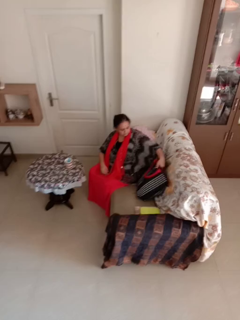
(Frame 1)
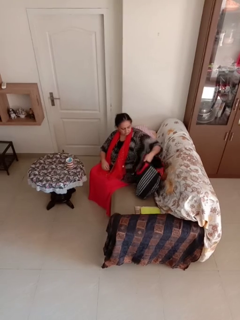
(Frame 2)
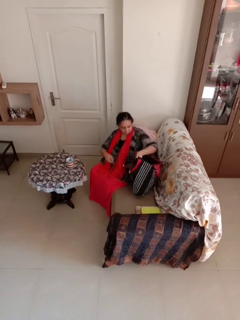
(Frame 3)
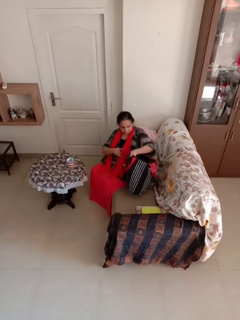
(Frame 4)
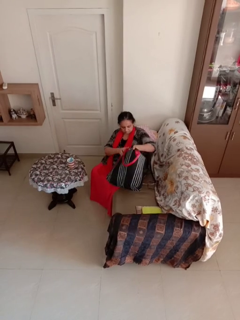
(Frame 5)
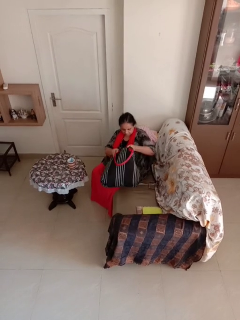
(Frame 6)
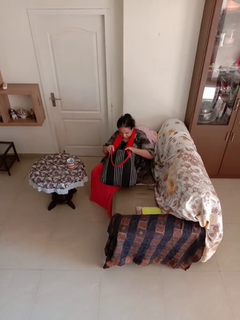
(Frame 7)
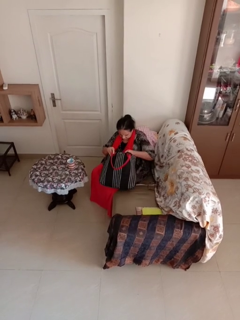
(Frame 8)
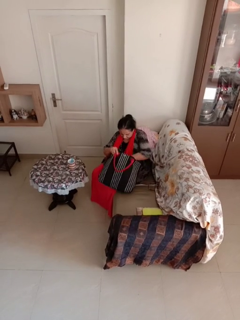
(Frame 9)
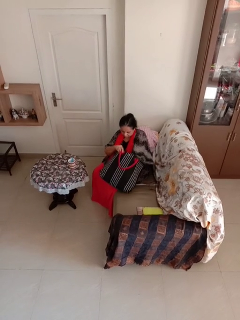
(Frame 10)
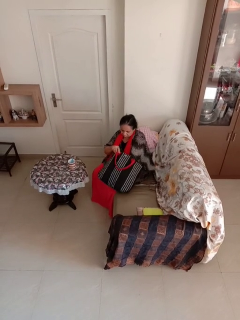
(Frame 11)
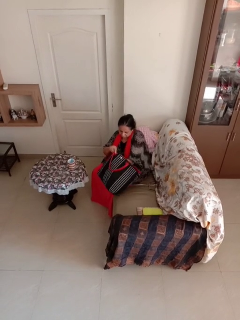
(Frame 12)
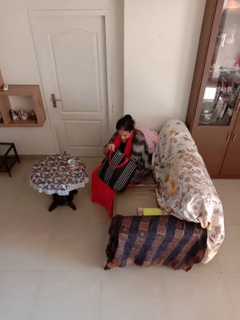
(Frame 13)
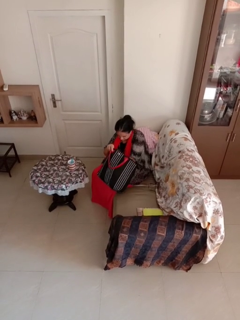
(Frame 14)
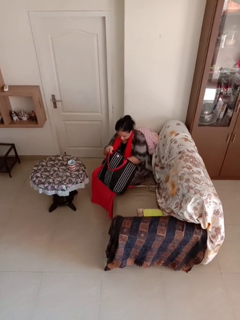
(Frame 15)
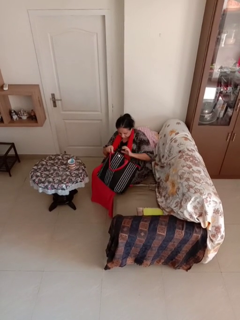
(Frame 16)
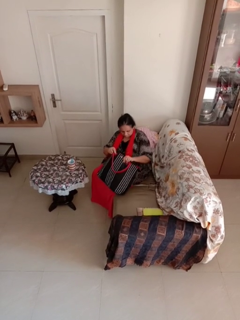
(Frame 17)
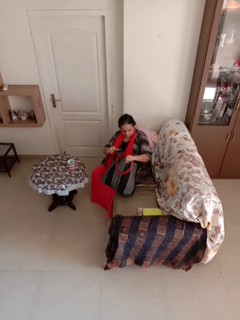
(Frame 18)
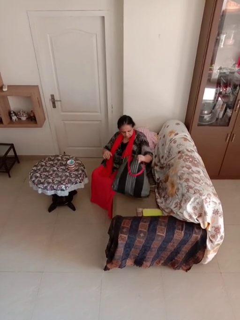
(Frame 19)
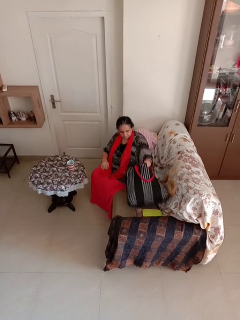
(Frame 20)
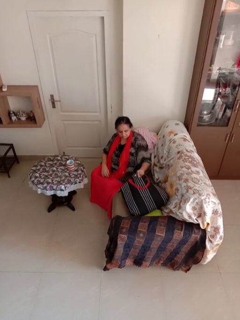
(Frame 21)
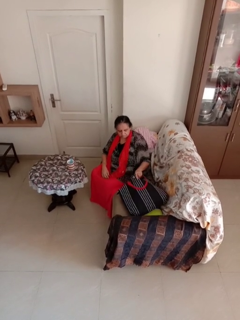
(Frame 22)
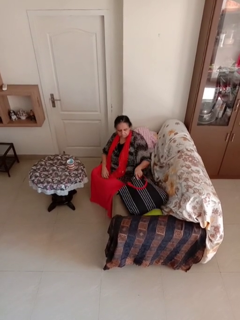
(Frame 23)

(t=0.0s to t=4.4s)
person searches in bag

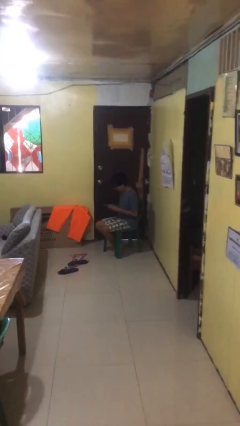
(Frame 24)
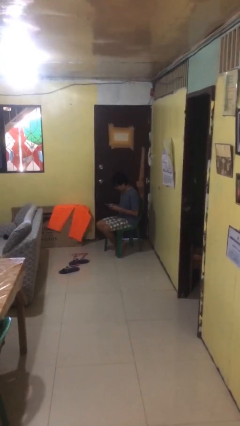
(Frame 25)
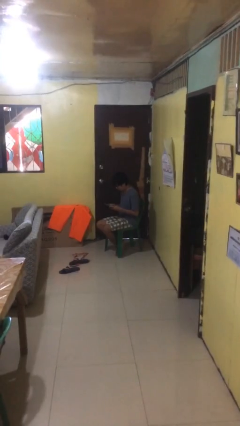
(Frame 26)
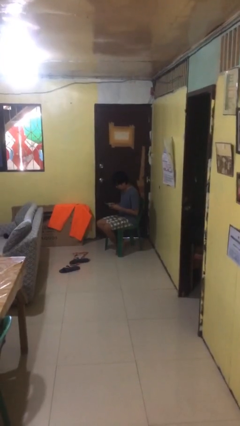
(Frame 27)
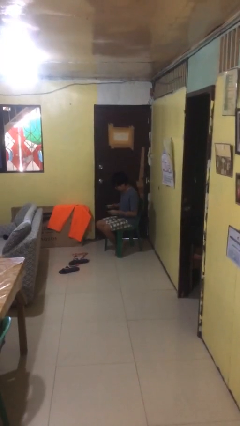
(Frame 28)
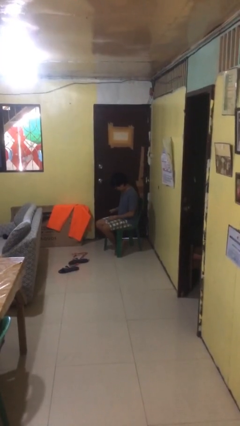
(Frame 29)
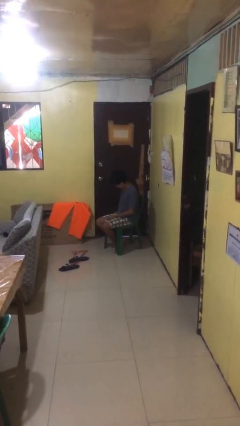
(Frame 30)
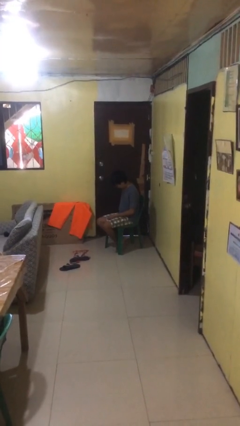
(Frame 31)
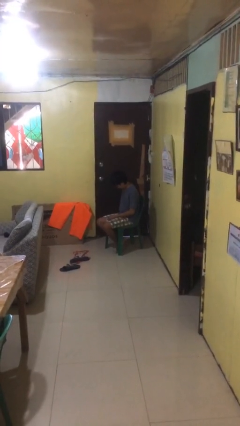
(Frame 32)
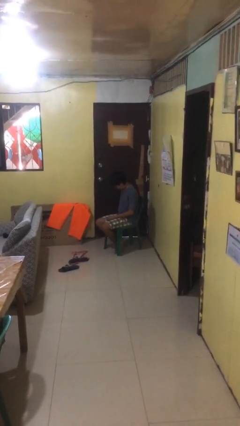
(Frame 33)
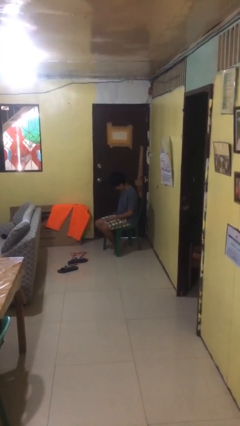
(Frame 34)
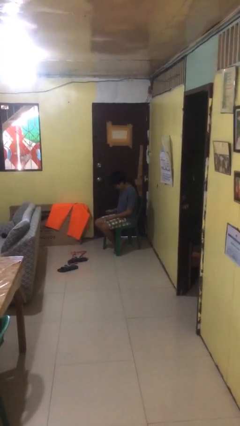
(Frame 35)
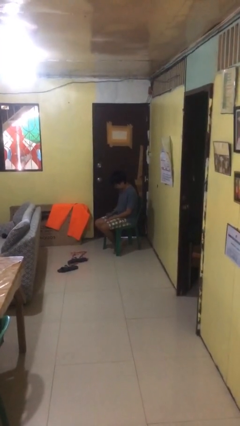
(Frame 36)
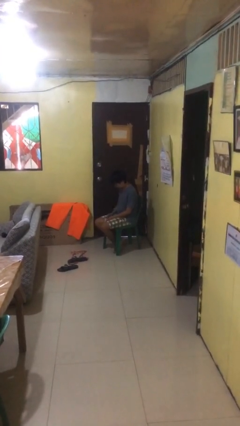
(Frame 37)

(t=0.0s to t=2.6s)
person puts phone into pocket

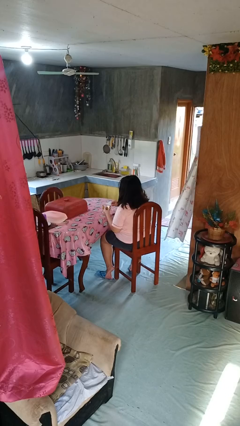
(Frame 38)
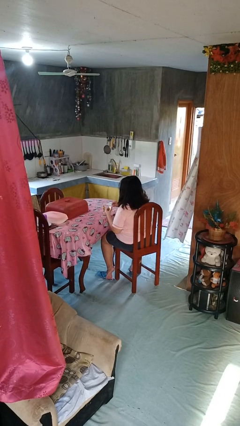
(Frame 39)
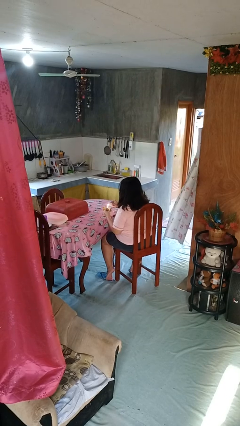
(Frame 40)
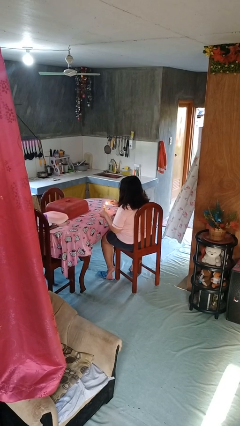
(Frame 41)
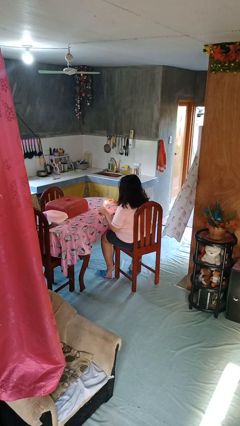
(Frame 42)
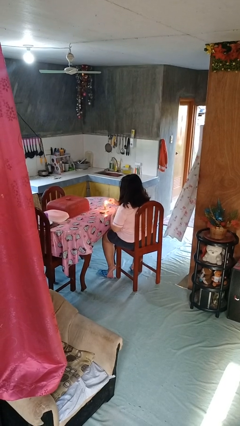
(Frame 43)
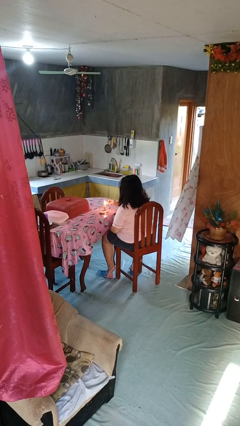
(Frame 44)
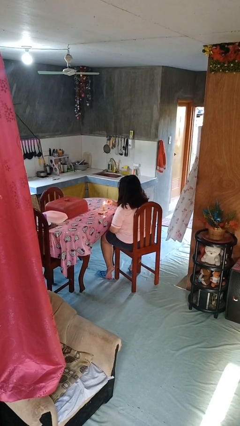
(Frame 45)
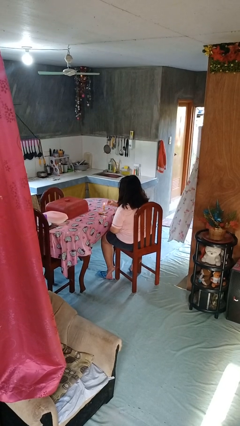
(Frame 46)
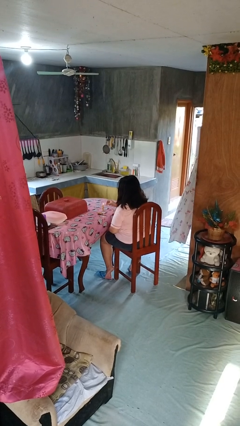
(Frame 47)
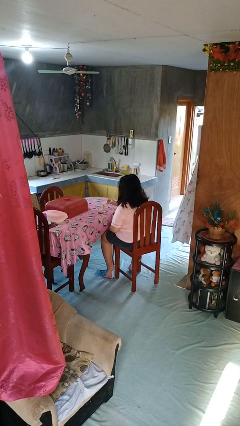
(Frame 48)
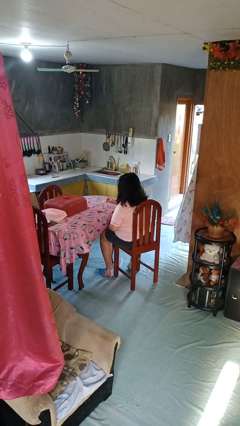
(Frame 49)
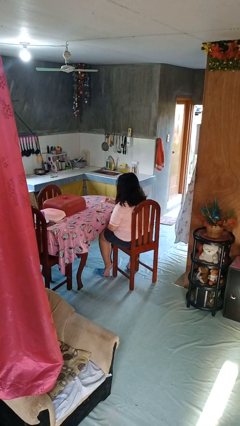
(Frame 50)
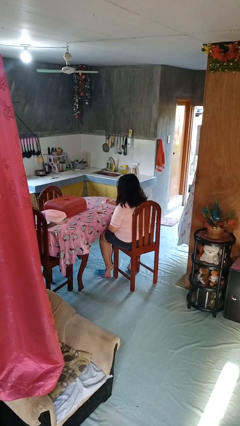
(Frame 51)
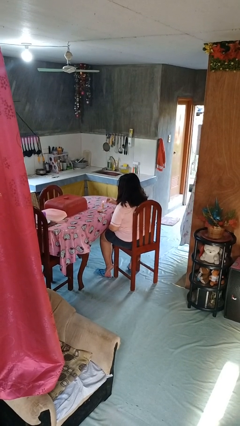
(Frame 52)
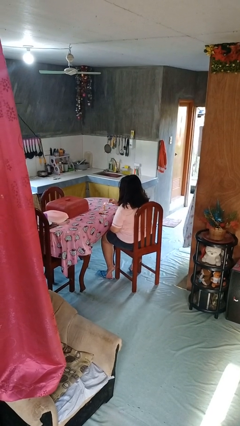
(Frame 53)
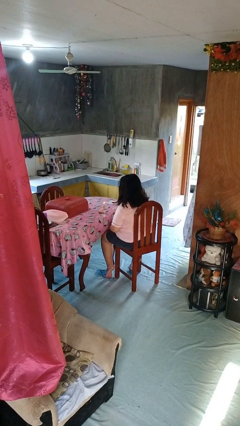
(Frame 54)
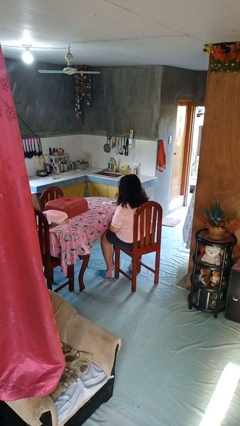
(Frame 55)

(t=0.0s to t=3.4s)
person lights candle

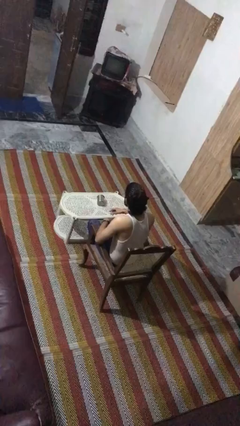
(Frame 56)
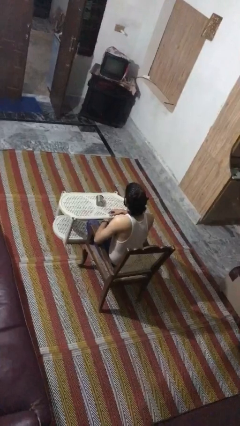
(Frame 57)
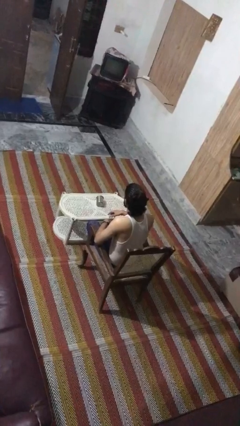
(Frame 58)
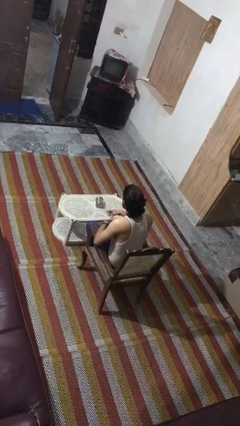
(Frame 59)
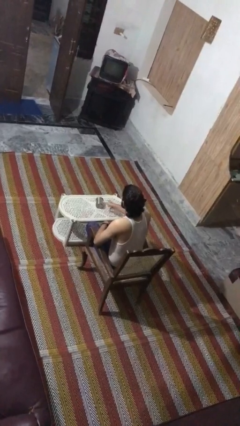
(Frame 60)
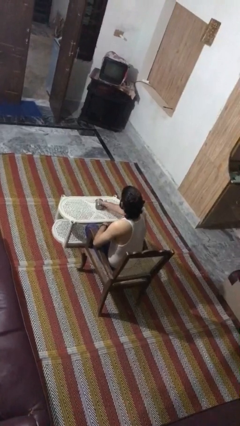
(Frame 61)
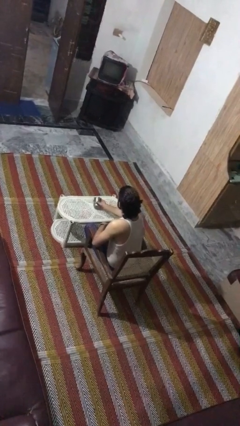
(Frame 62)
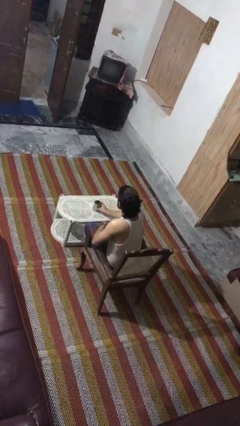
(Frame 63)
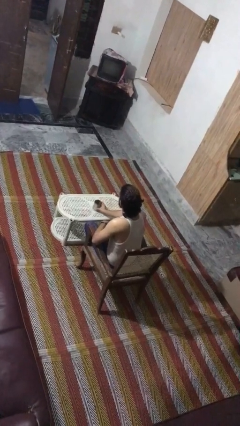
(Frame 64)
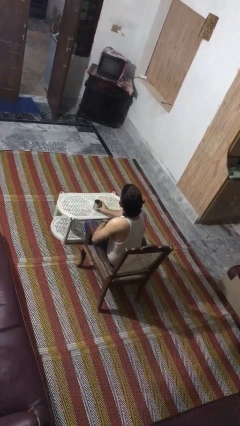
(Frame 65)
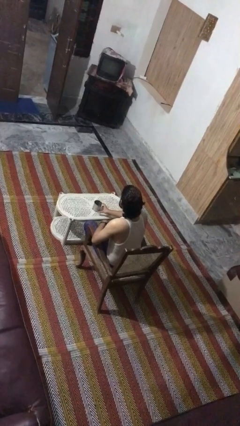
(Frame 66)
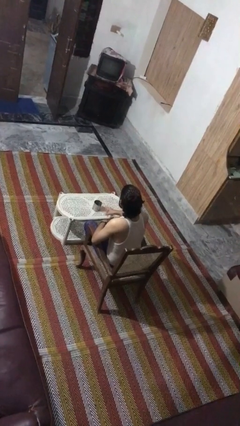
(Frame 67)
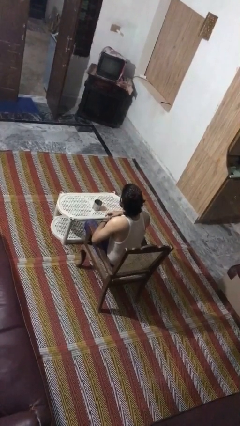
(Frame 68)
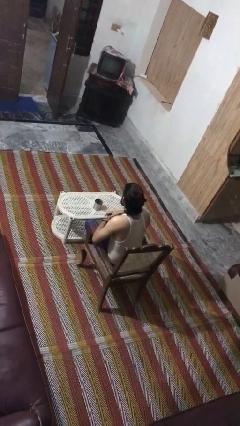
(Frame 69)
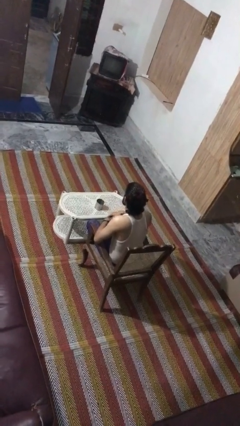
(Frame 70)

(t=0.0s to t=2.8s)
person sets upright glass

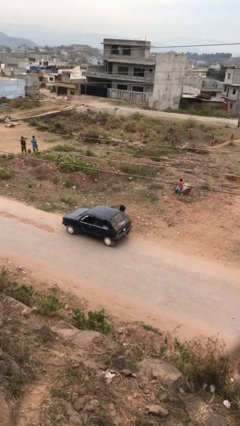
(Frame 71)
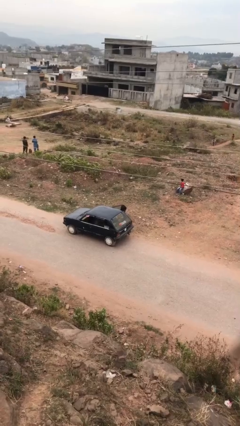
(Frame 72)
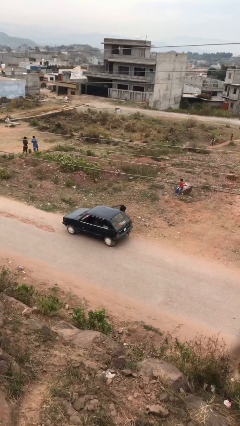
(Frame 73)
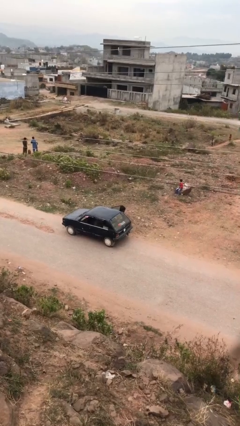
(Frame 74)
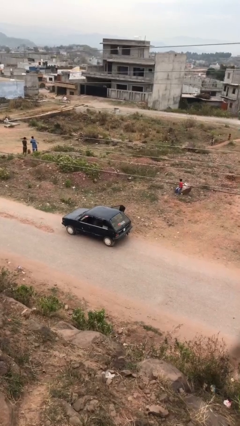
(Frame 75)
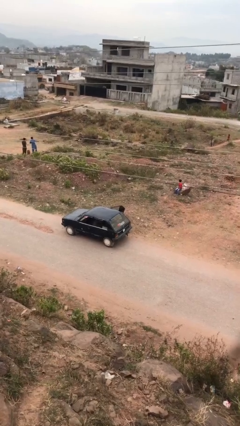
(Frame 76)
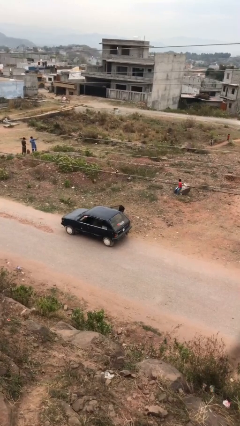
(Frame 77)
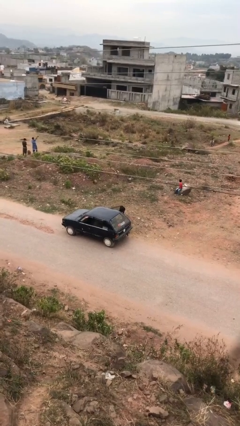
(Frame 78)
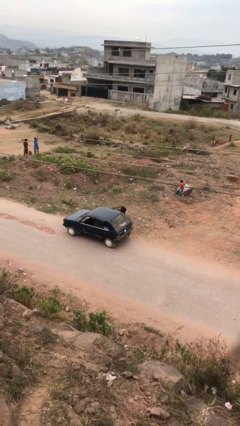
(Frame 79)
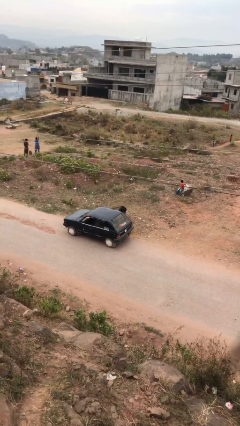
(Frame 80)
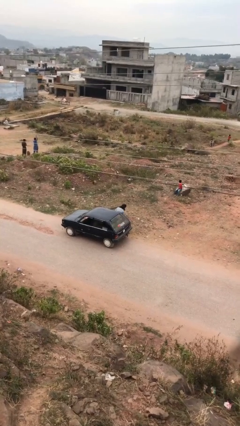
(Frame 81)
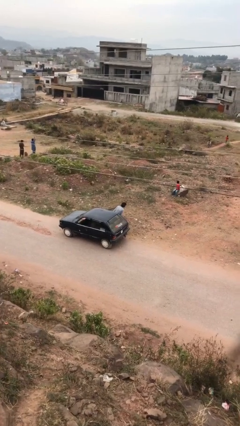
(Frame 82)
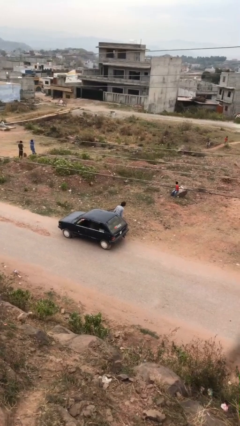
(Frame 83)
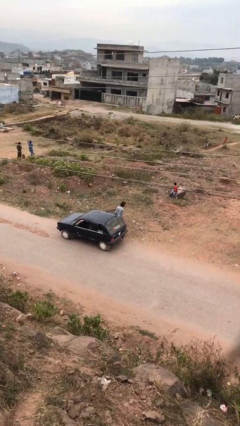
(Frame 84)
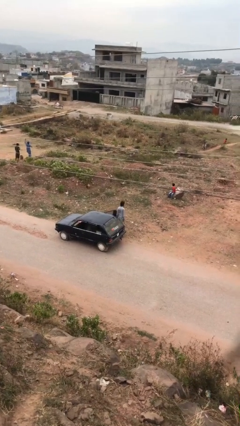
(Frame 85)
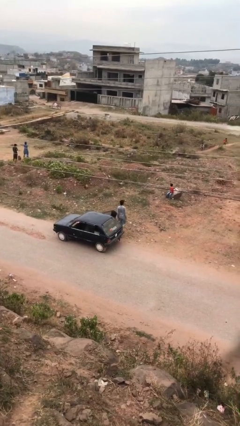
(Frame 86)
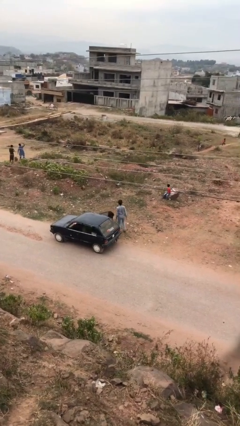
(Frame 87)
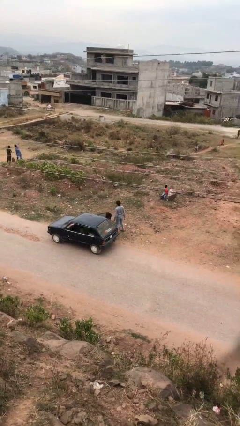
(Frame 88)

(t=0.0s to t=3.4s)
person exits car

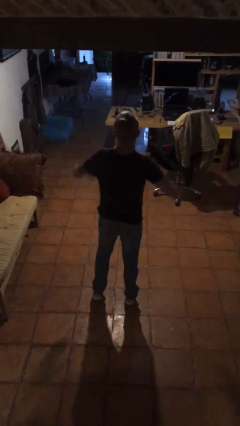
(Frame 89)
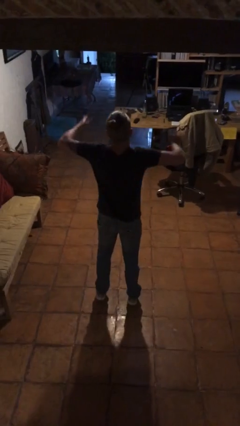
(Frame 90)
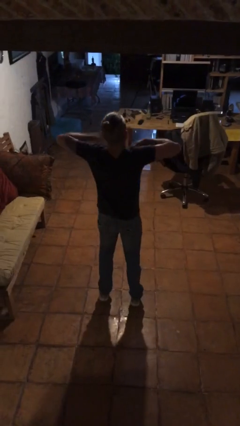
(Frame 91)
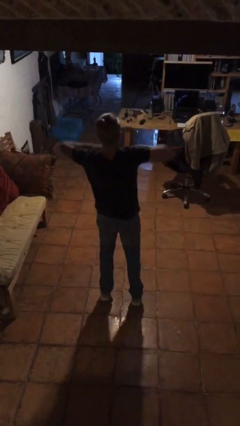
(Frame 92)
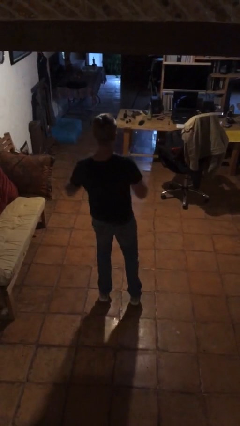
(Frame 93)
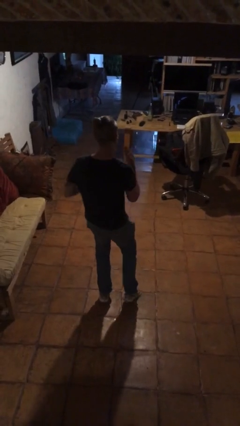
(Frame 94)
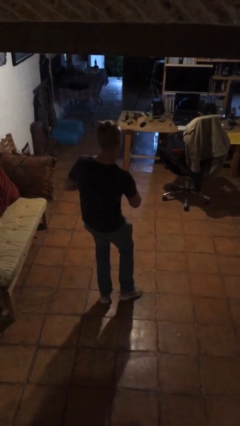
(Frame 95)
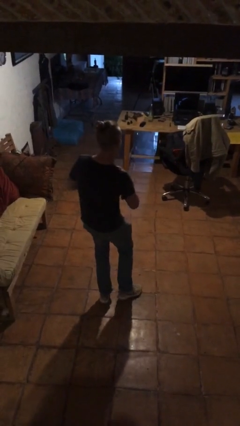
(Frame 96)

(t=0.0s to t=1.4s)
person drums on chest
